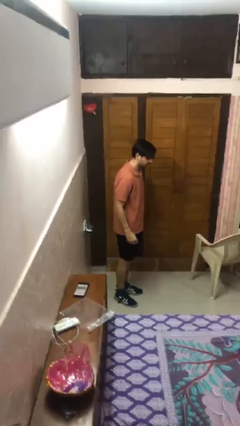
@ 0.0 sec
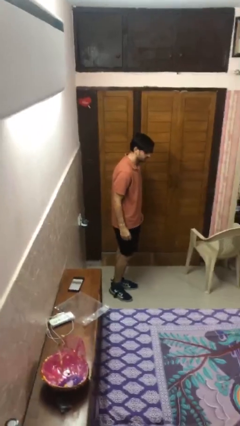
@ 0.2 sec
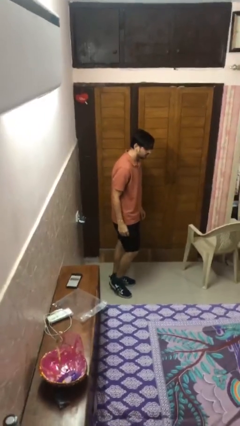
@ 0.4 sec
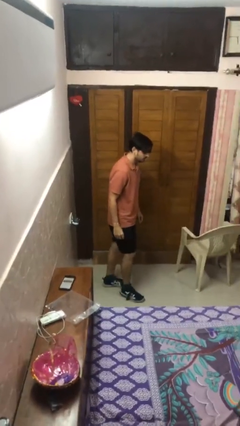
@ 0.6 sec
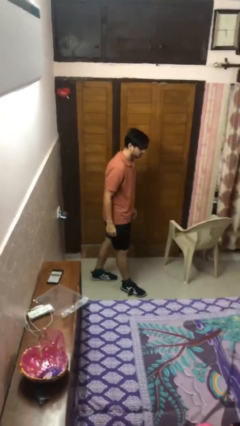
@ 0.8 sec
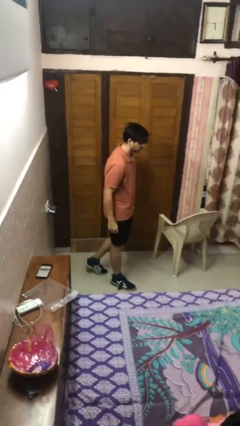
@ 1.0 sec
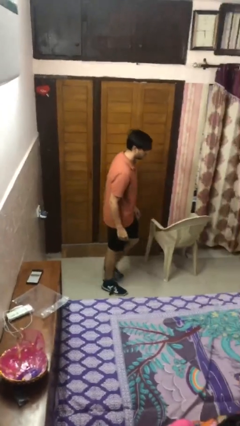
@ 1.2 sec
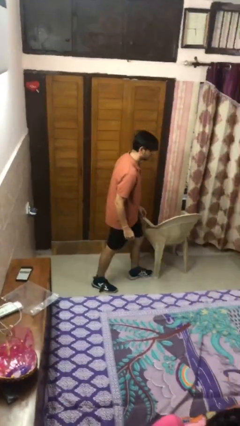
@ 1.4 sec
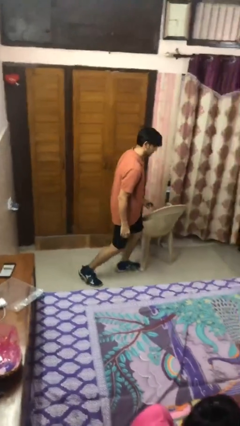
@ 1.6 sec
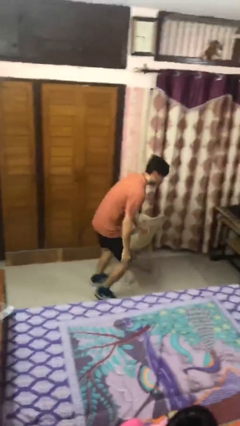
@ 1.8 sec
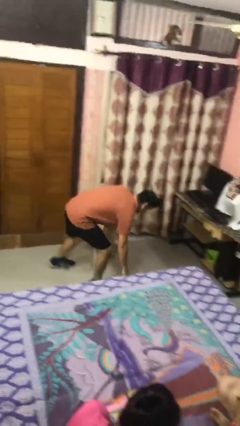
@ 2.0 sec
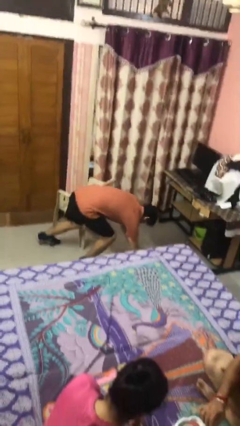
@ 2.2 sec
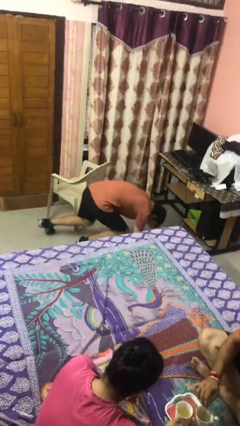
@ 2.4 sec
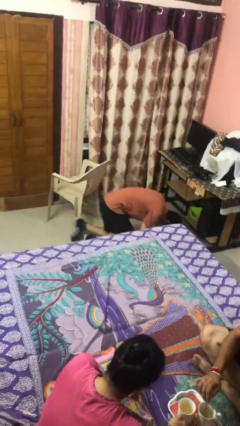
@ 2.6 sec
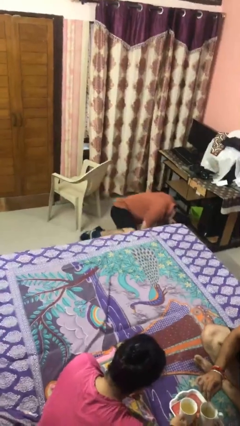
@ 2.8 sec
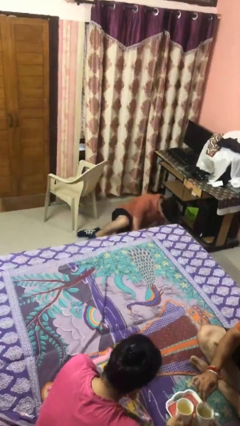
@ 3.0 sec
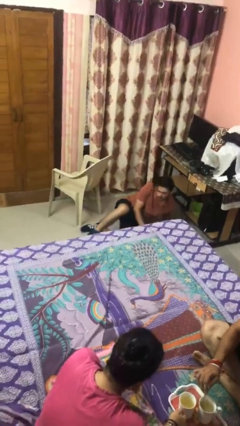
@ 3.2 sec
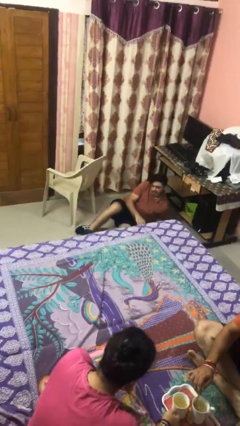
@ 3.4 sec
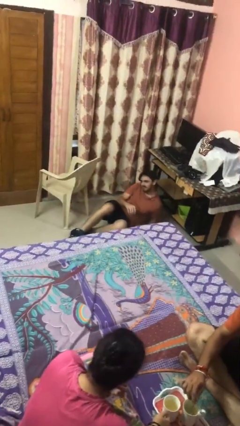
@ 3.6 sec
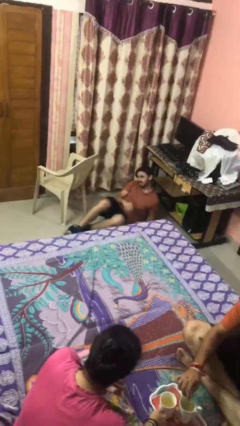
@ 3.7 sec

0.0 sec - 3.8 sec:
person trips on object on floor

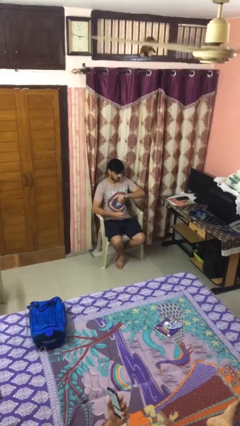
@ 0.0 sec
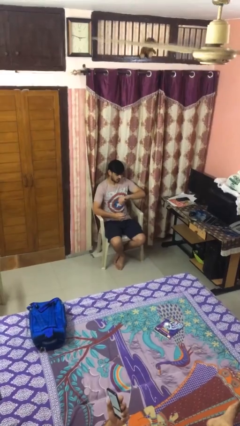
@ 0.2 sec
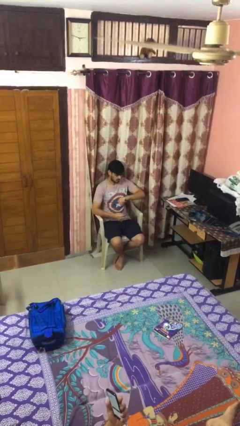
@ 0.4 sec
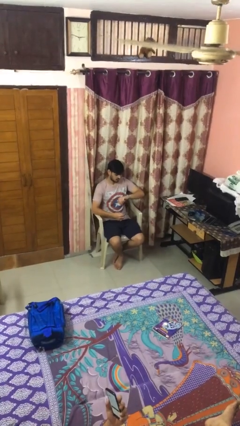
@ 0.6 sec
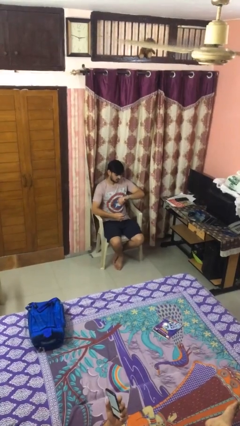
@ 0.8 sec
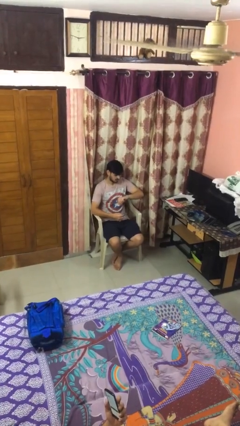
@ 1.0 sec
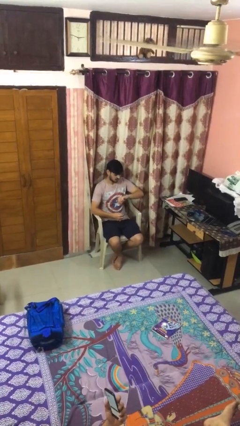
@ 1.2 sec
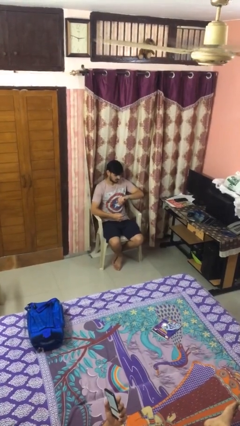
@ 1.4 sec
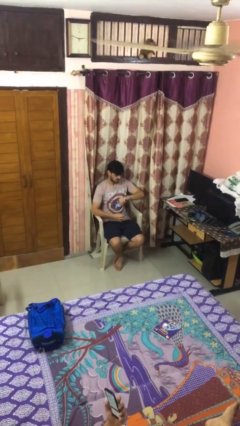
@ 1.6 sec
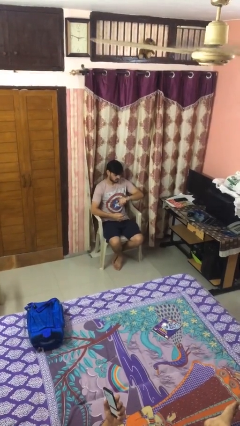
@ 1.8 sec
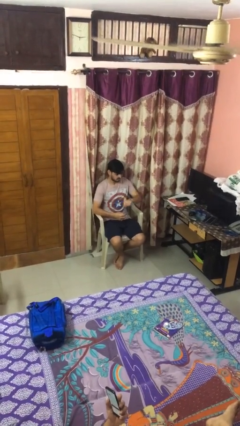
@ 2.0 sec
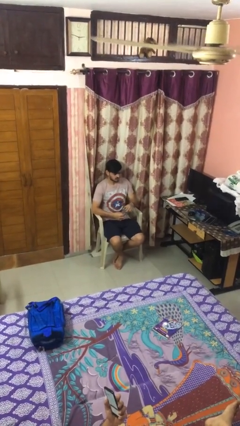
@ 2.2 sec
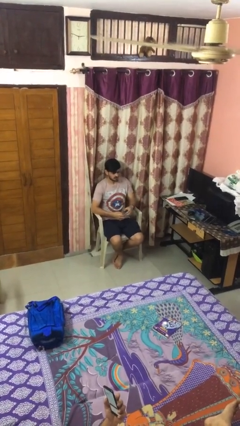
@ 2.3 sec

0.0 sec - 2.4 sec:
person looks at wristwatch

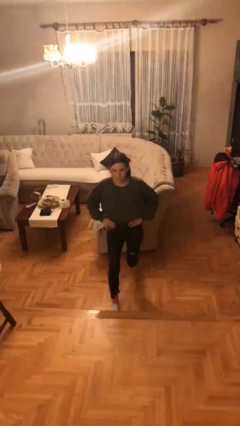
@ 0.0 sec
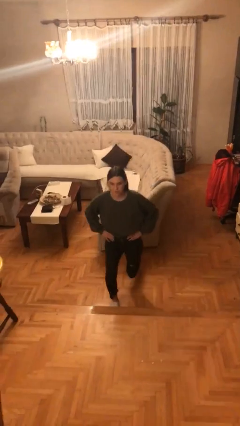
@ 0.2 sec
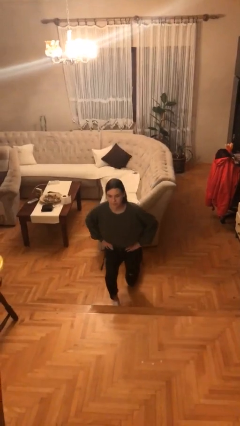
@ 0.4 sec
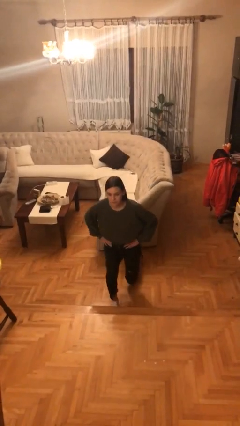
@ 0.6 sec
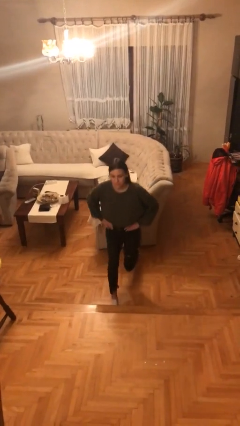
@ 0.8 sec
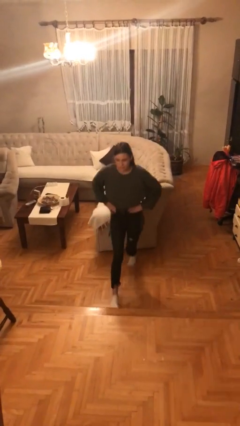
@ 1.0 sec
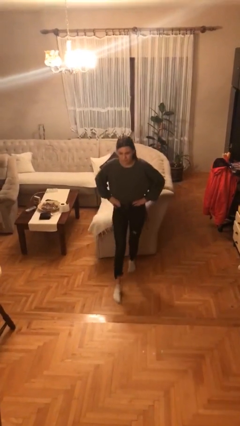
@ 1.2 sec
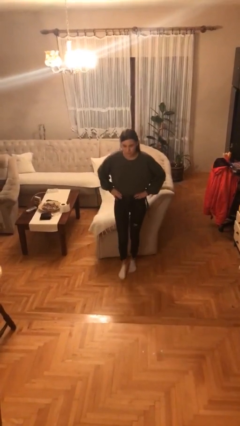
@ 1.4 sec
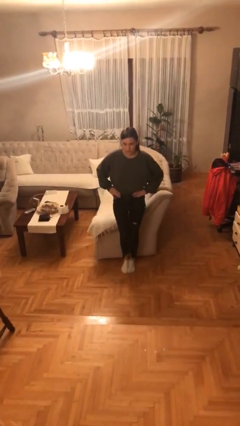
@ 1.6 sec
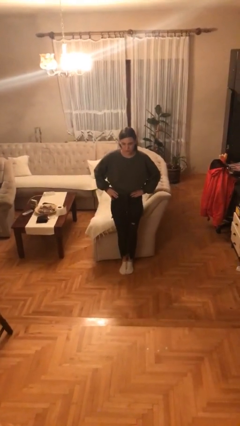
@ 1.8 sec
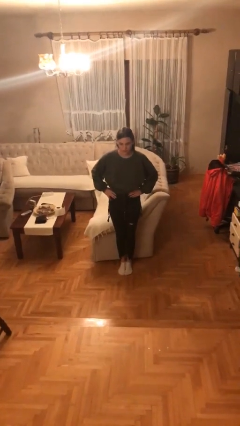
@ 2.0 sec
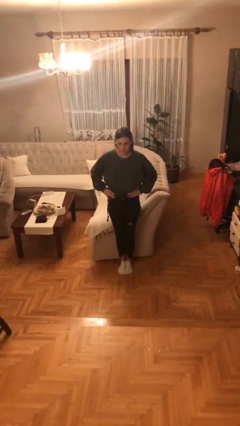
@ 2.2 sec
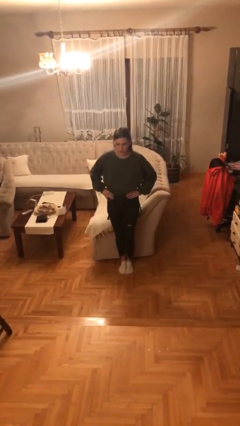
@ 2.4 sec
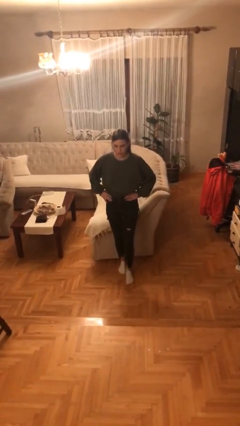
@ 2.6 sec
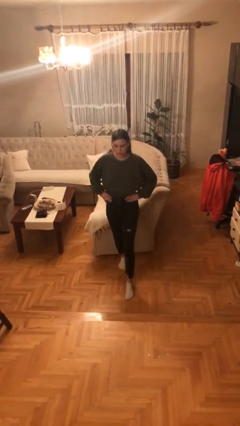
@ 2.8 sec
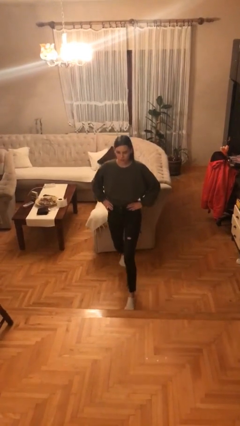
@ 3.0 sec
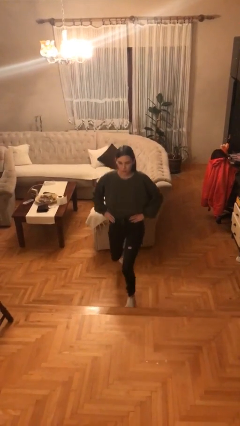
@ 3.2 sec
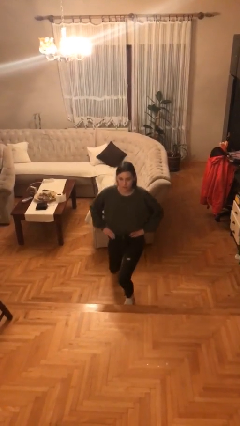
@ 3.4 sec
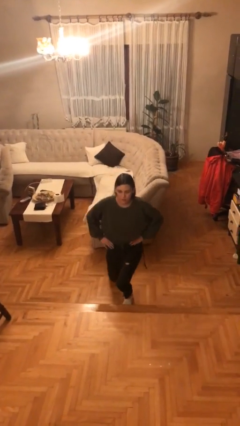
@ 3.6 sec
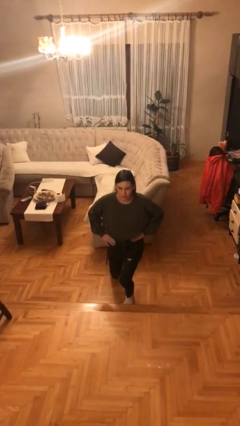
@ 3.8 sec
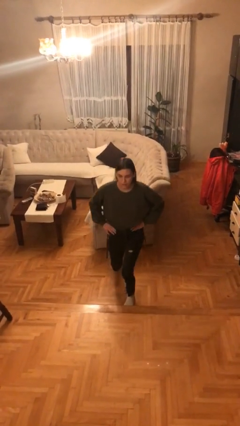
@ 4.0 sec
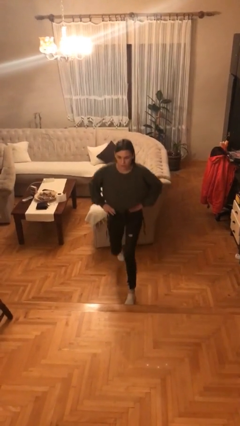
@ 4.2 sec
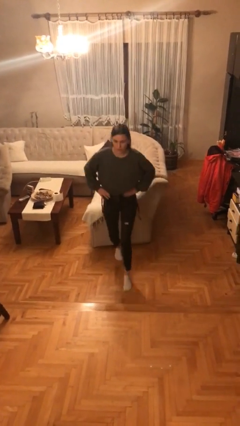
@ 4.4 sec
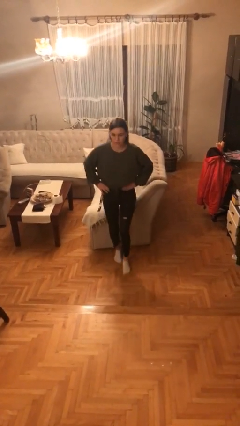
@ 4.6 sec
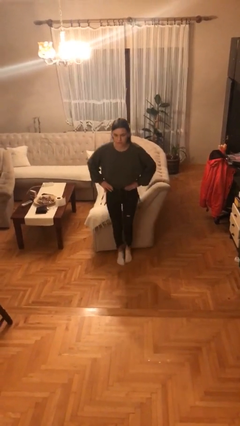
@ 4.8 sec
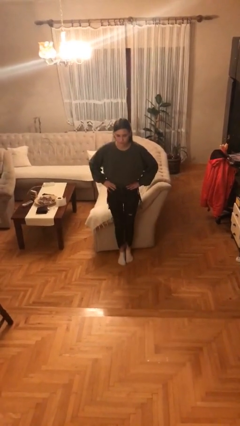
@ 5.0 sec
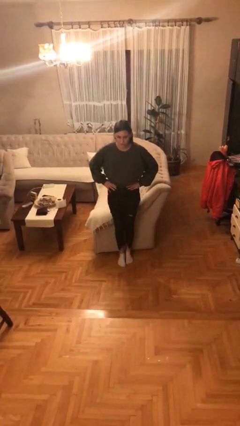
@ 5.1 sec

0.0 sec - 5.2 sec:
person exercises with lunges

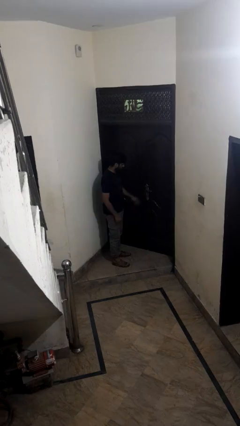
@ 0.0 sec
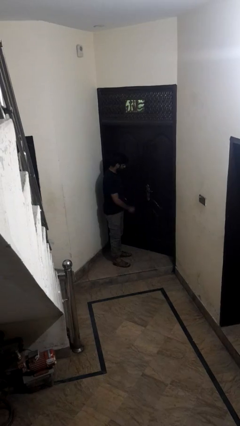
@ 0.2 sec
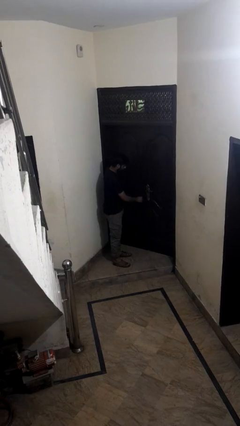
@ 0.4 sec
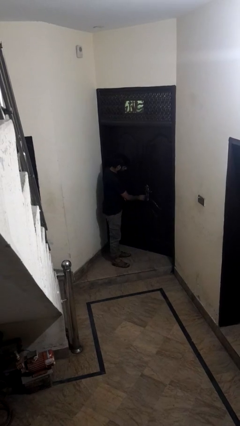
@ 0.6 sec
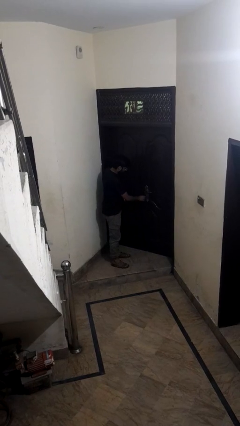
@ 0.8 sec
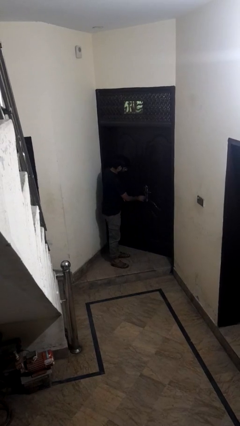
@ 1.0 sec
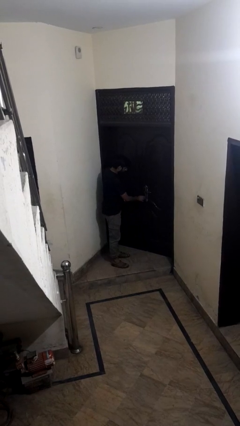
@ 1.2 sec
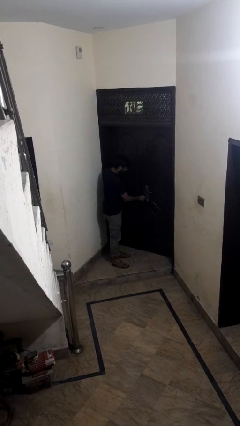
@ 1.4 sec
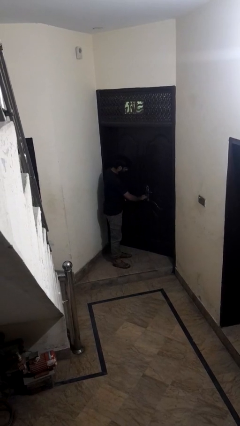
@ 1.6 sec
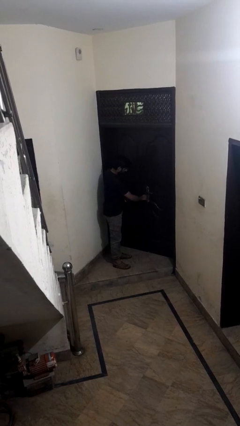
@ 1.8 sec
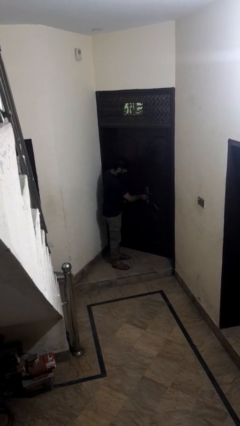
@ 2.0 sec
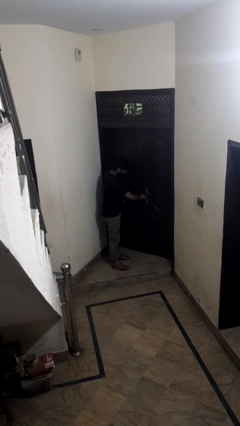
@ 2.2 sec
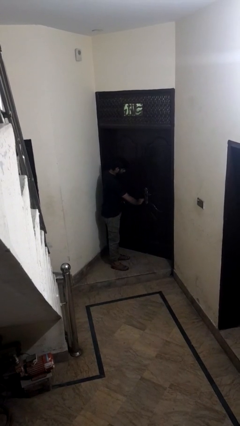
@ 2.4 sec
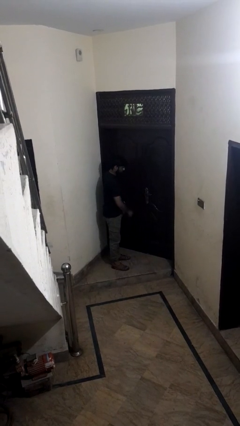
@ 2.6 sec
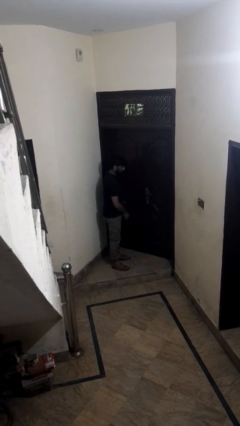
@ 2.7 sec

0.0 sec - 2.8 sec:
person locks door with keys

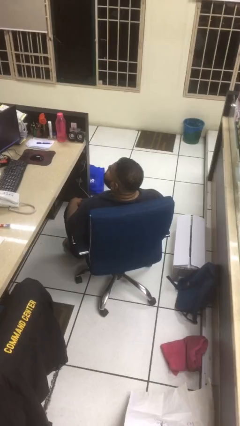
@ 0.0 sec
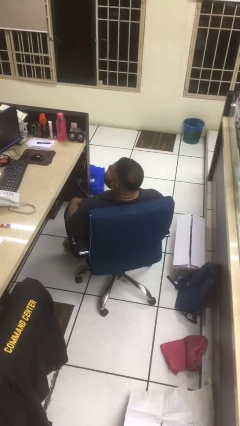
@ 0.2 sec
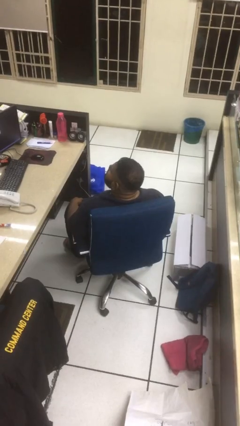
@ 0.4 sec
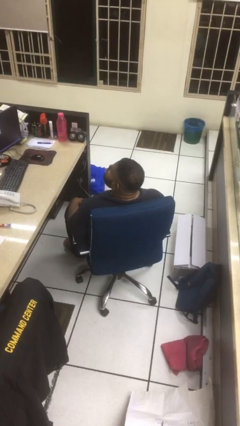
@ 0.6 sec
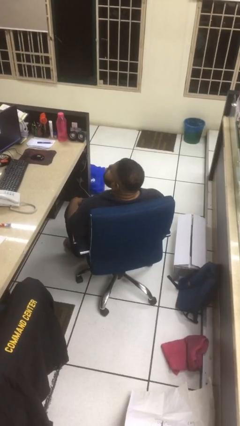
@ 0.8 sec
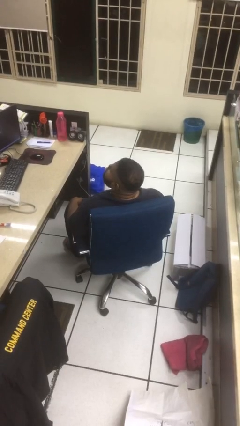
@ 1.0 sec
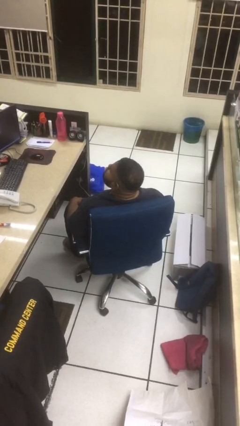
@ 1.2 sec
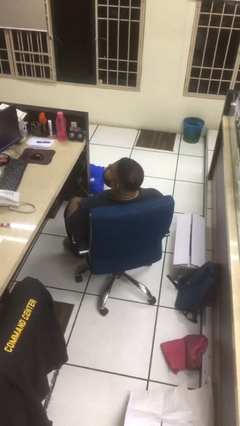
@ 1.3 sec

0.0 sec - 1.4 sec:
person sticks out tongue

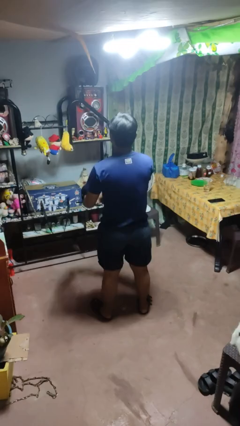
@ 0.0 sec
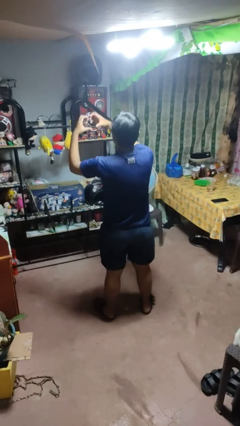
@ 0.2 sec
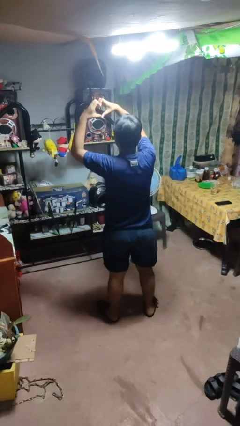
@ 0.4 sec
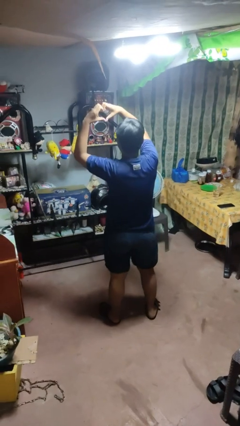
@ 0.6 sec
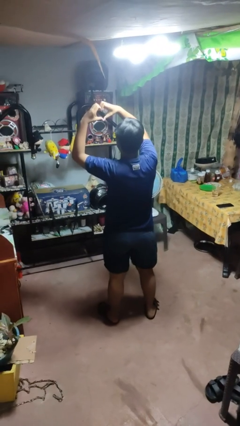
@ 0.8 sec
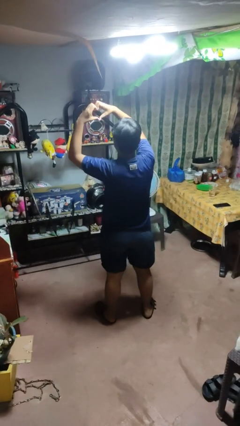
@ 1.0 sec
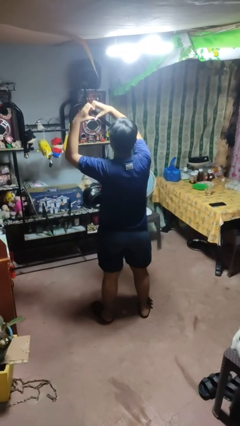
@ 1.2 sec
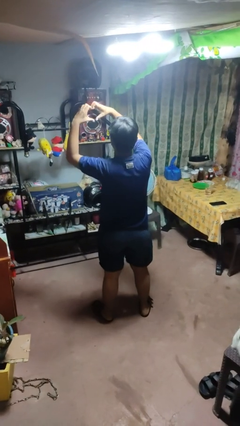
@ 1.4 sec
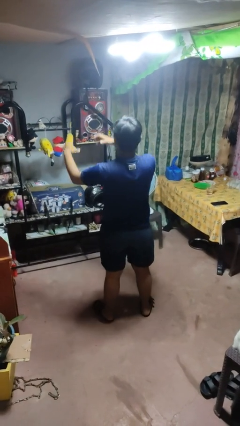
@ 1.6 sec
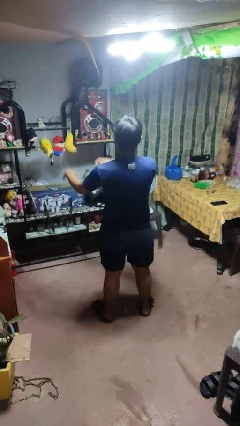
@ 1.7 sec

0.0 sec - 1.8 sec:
person gestures heart
